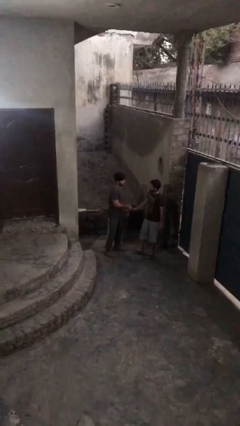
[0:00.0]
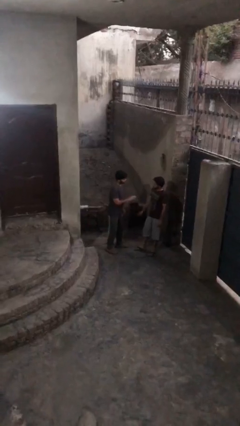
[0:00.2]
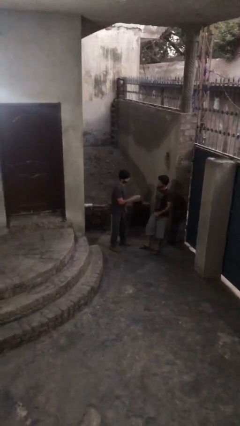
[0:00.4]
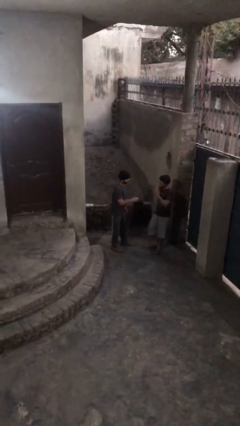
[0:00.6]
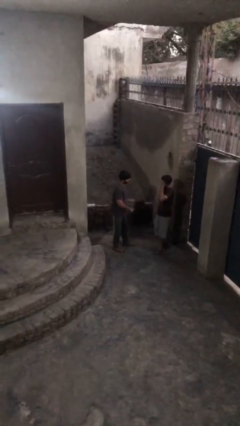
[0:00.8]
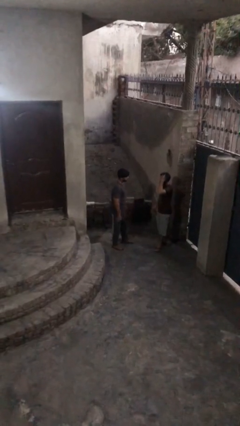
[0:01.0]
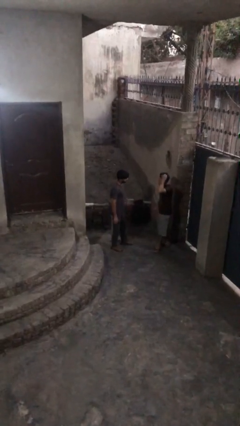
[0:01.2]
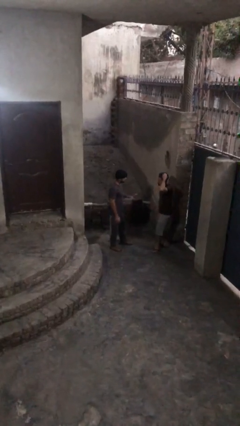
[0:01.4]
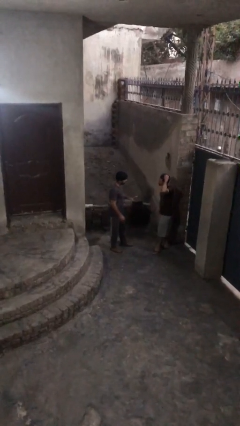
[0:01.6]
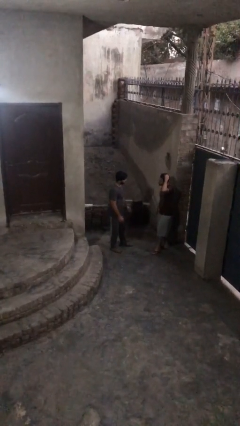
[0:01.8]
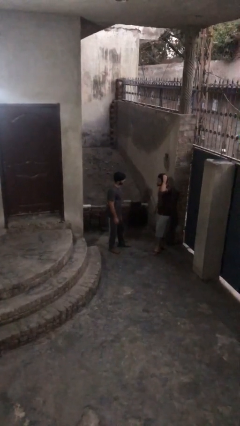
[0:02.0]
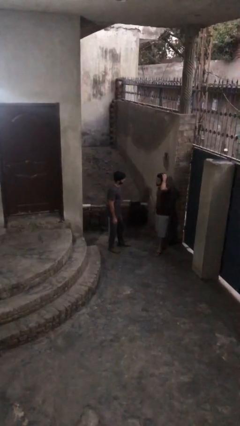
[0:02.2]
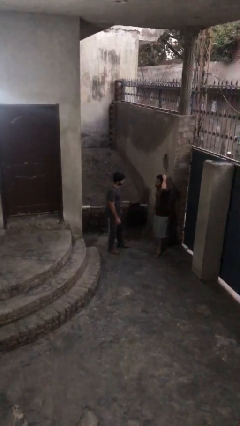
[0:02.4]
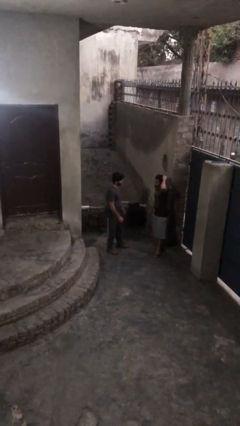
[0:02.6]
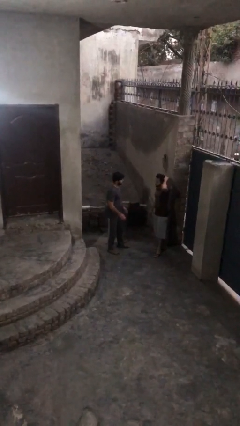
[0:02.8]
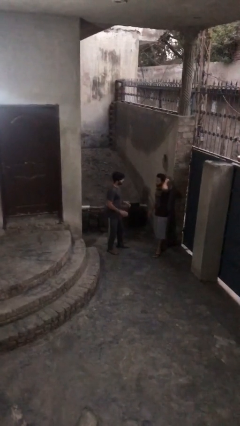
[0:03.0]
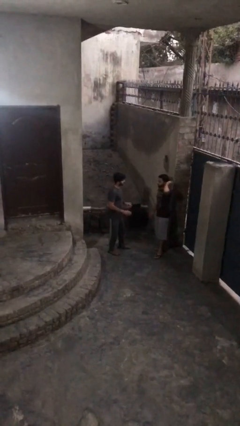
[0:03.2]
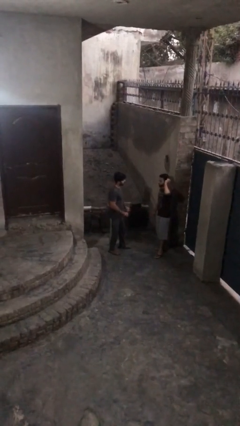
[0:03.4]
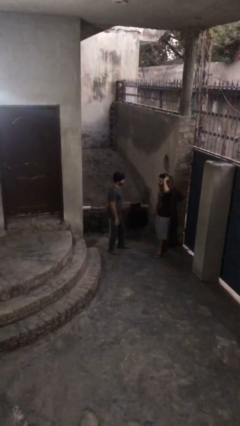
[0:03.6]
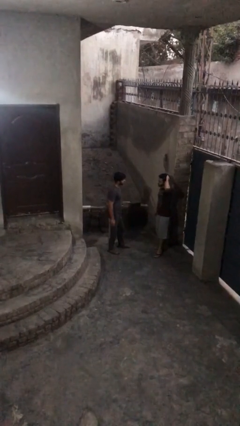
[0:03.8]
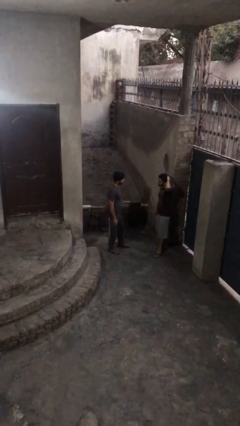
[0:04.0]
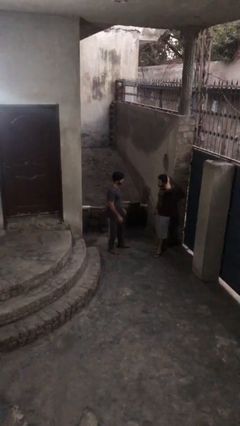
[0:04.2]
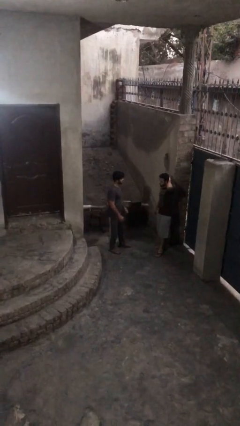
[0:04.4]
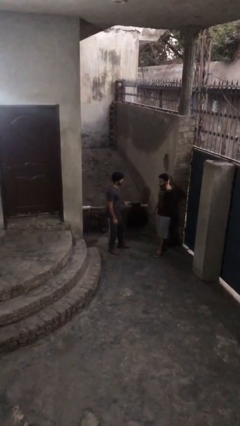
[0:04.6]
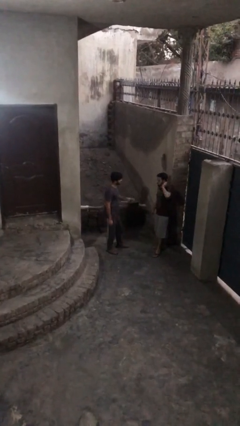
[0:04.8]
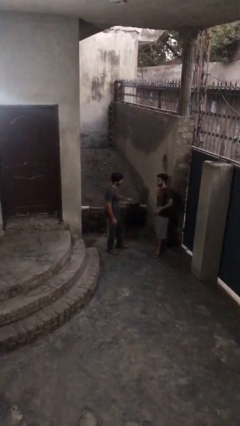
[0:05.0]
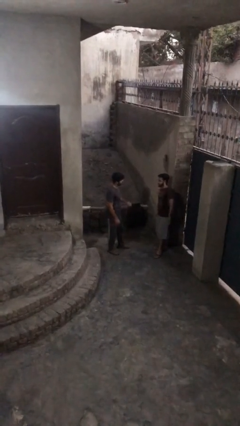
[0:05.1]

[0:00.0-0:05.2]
person talks to person

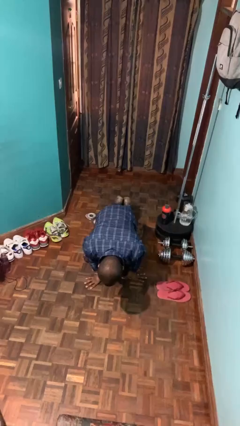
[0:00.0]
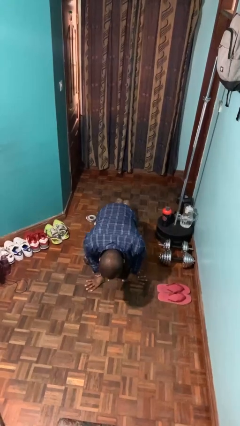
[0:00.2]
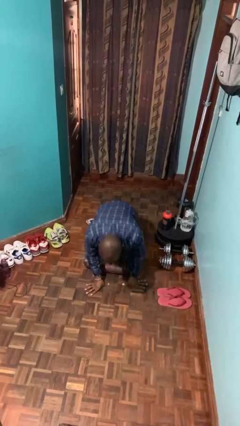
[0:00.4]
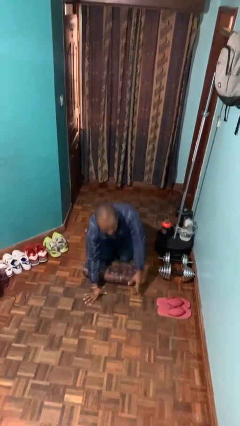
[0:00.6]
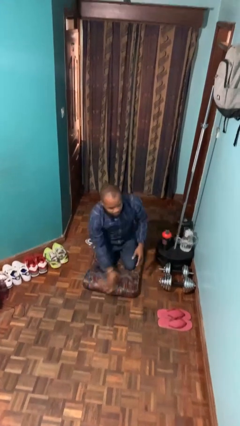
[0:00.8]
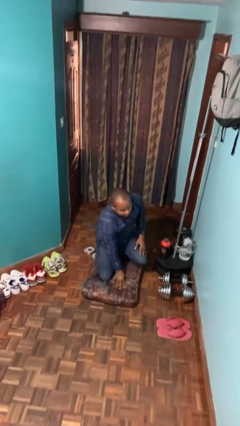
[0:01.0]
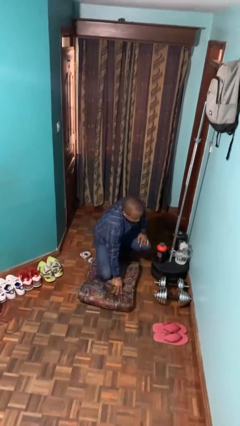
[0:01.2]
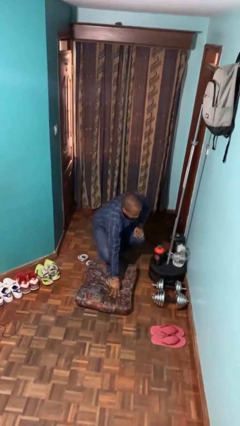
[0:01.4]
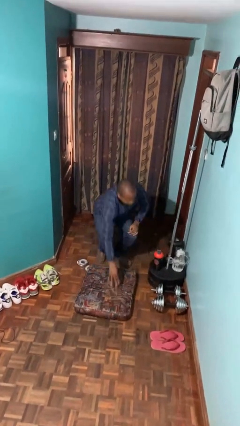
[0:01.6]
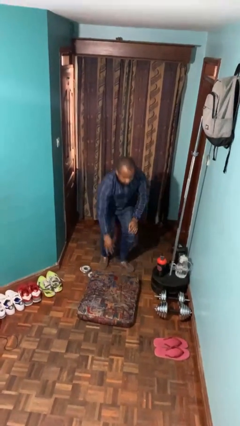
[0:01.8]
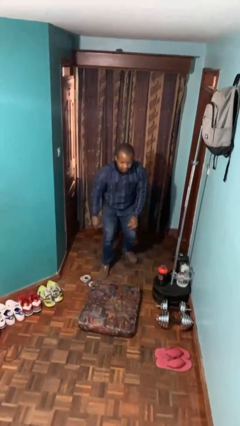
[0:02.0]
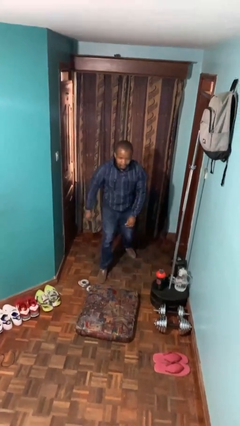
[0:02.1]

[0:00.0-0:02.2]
person stands up from floor

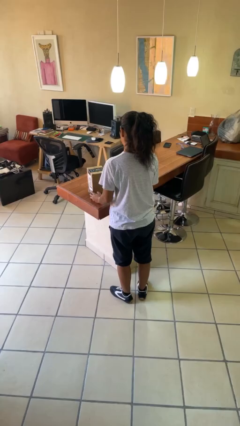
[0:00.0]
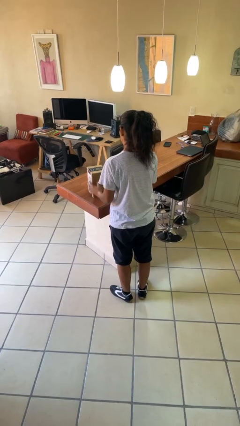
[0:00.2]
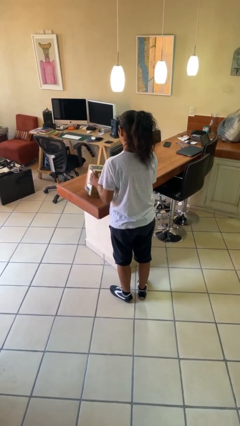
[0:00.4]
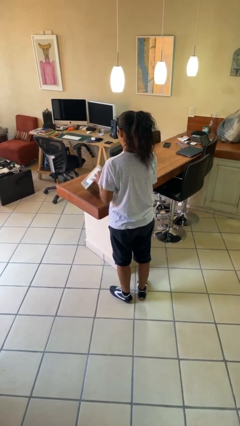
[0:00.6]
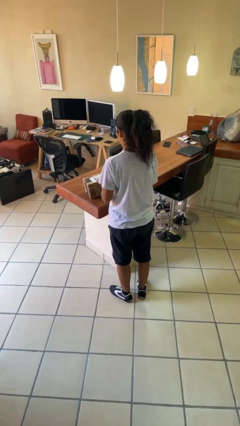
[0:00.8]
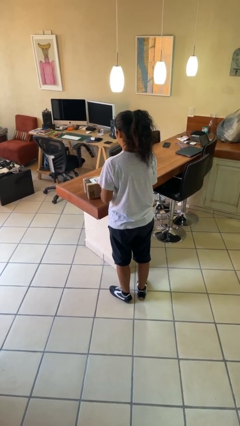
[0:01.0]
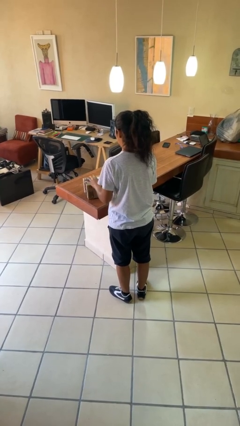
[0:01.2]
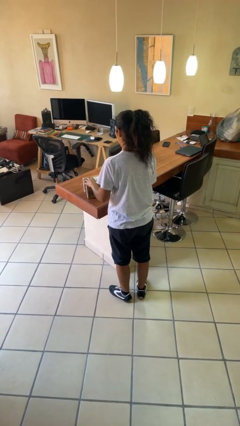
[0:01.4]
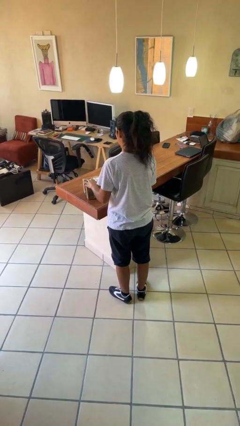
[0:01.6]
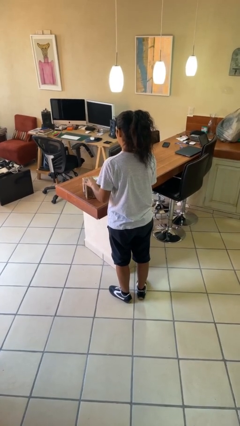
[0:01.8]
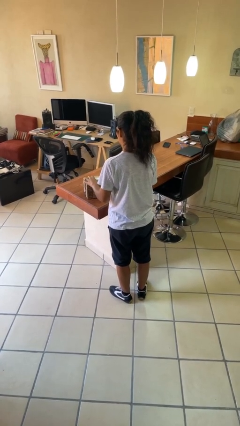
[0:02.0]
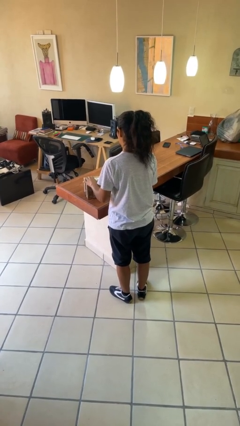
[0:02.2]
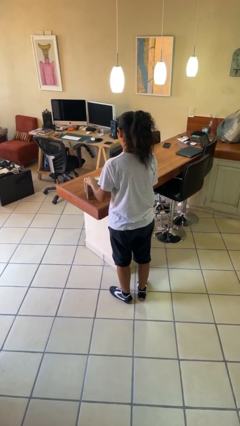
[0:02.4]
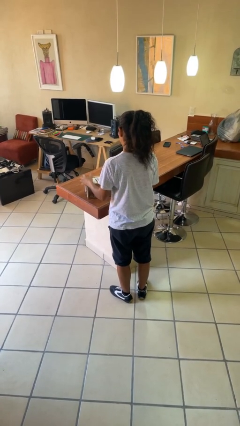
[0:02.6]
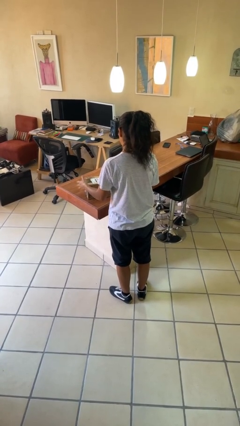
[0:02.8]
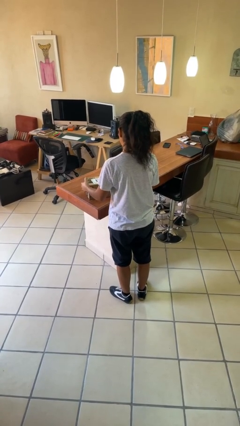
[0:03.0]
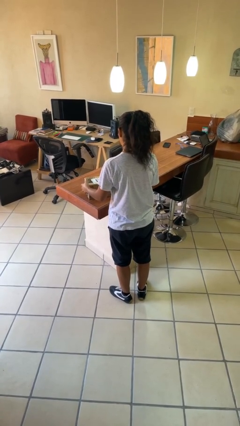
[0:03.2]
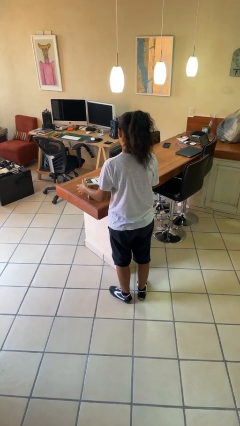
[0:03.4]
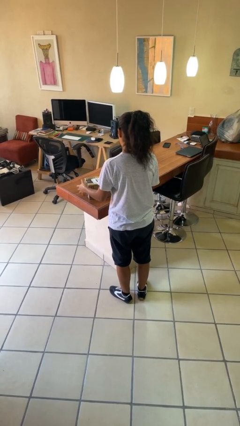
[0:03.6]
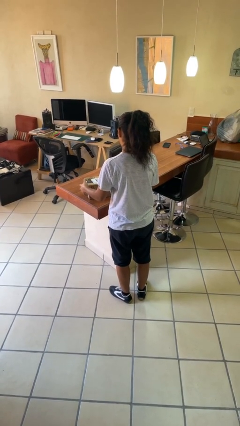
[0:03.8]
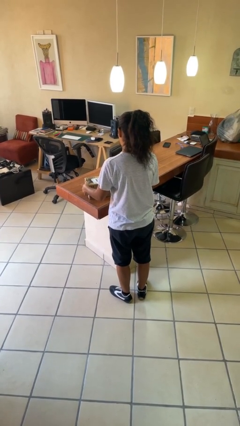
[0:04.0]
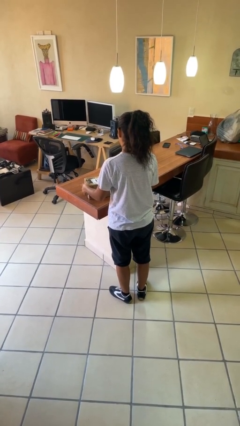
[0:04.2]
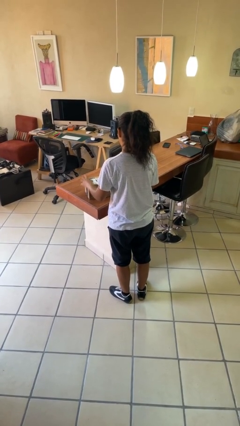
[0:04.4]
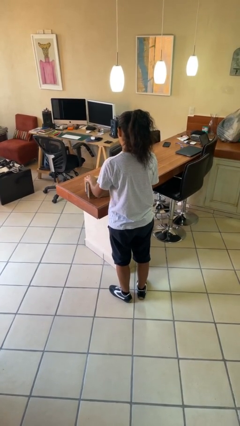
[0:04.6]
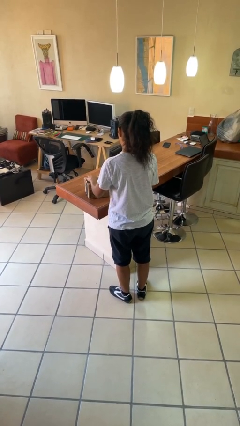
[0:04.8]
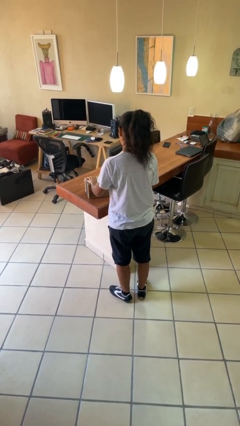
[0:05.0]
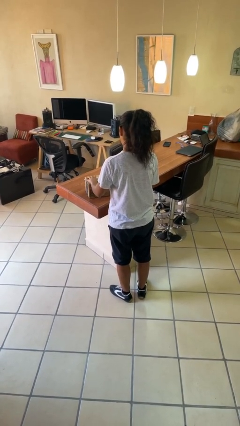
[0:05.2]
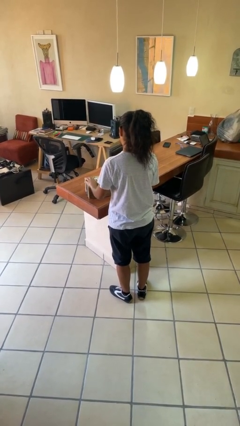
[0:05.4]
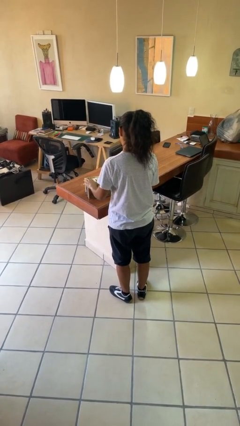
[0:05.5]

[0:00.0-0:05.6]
person taps object with finger

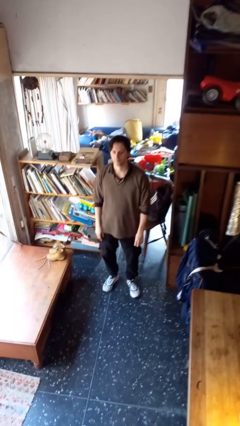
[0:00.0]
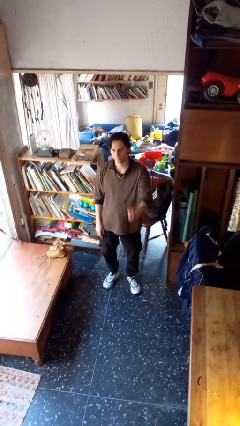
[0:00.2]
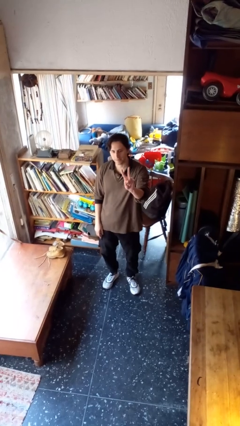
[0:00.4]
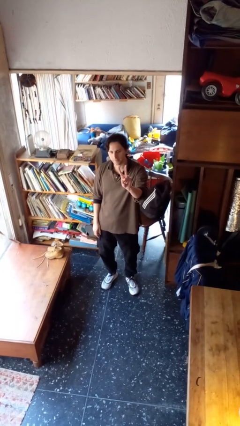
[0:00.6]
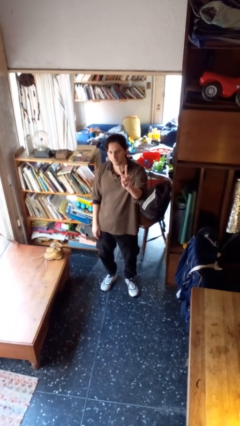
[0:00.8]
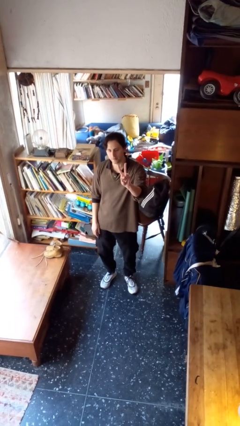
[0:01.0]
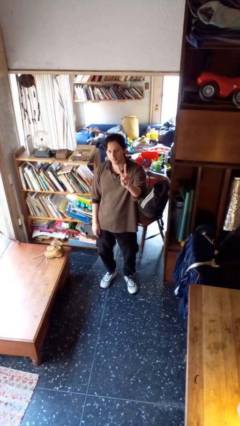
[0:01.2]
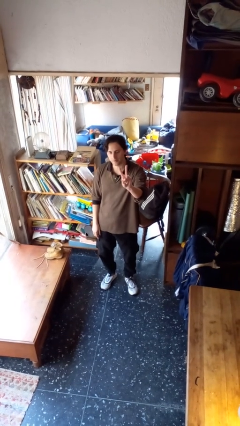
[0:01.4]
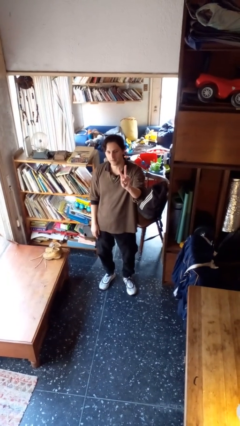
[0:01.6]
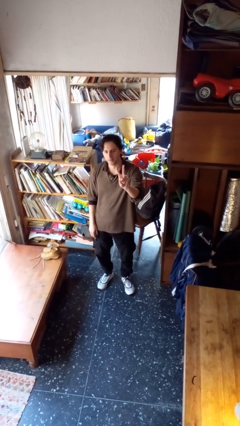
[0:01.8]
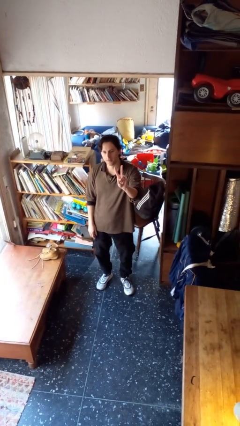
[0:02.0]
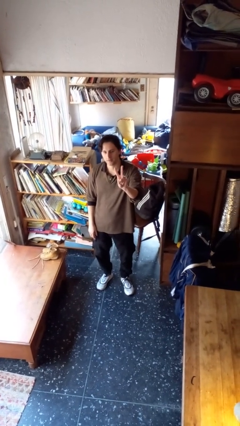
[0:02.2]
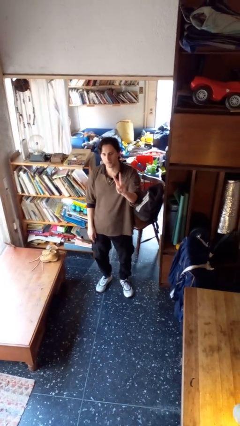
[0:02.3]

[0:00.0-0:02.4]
person gestures peace

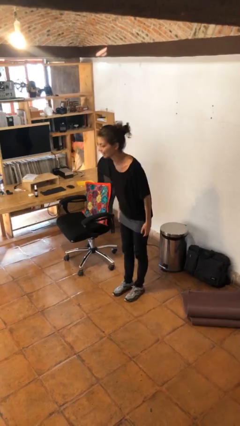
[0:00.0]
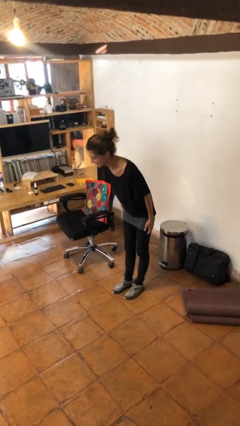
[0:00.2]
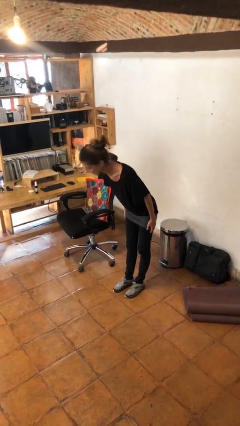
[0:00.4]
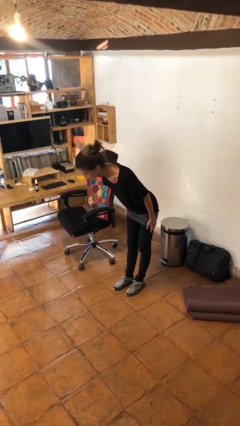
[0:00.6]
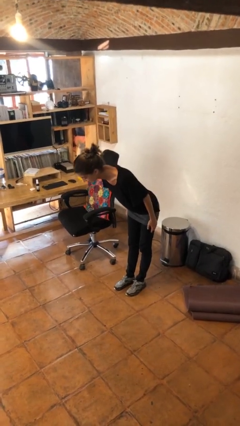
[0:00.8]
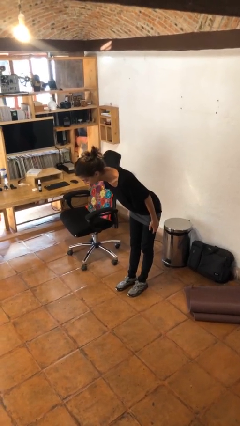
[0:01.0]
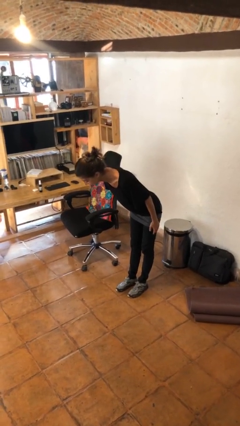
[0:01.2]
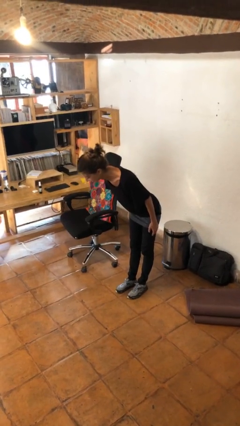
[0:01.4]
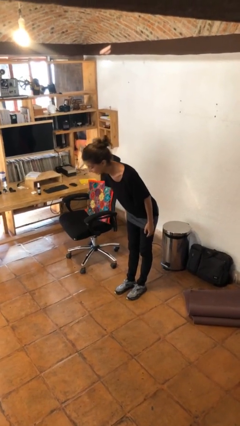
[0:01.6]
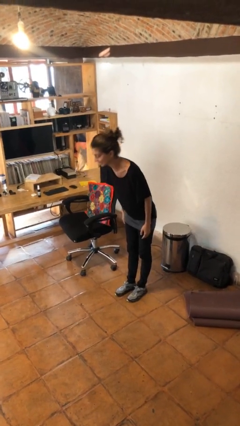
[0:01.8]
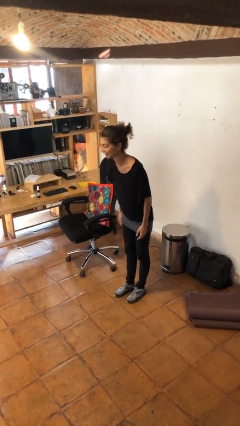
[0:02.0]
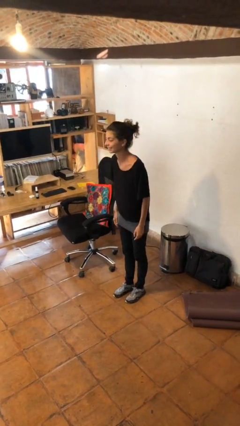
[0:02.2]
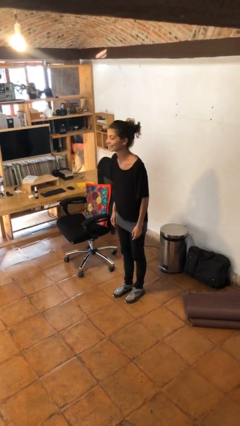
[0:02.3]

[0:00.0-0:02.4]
person bows
